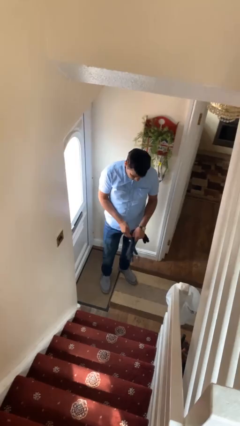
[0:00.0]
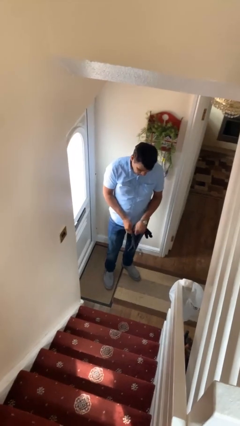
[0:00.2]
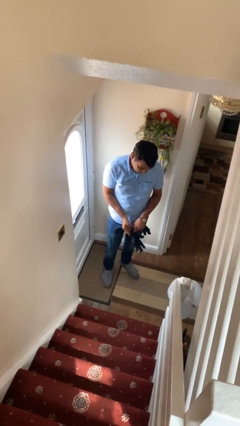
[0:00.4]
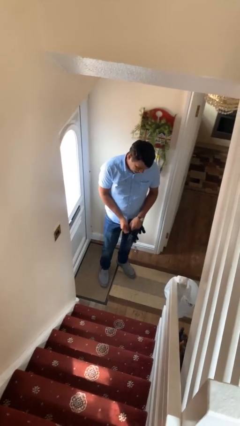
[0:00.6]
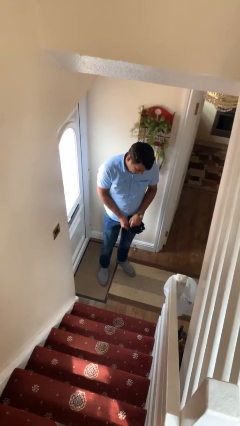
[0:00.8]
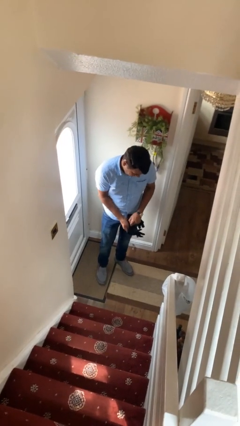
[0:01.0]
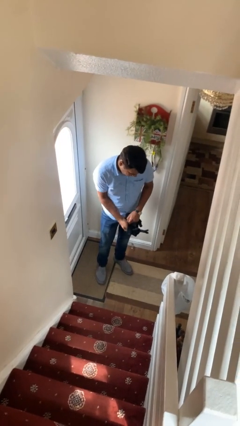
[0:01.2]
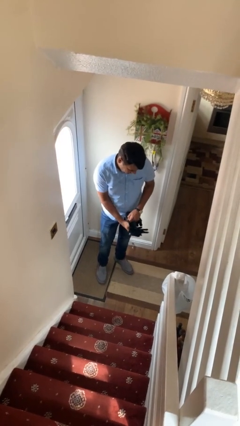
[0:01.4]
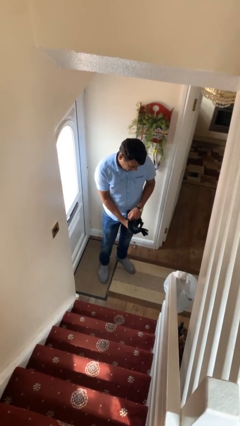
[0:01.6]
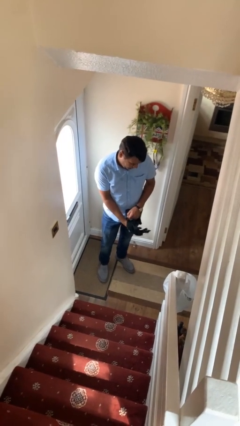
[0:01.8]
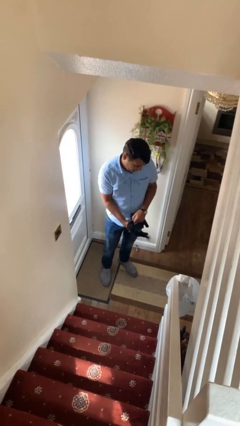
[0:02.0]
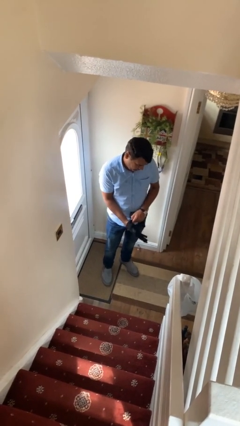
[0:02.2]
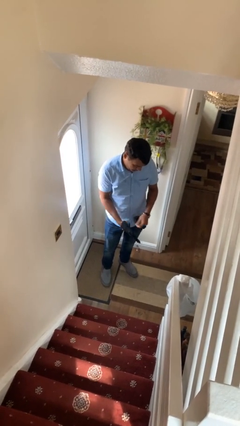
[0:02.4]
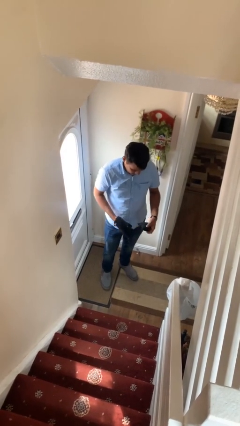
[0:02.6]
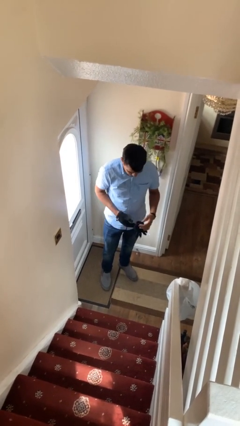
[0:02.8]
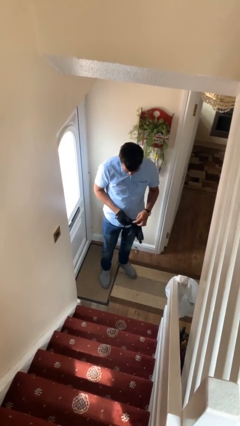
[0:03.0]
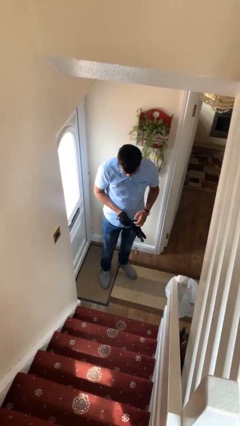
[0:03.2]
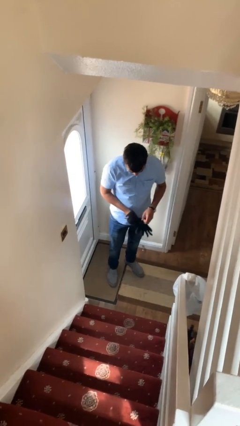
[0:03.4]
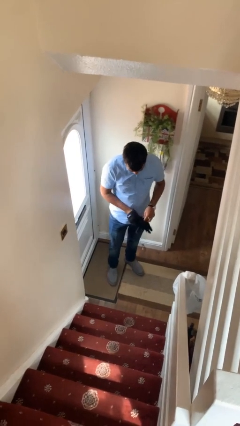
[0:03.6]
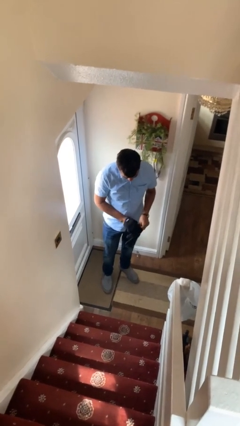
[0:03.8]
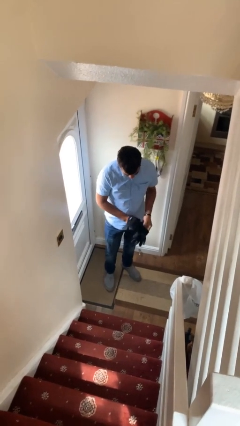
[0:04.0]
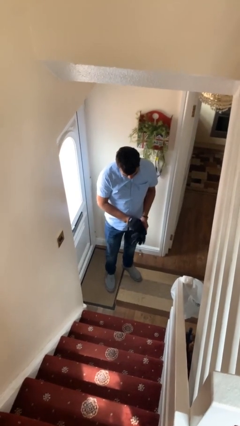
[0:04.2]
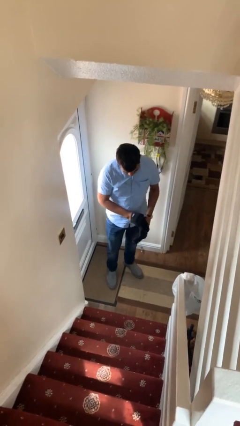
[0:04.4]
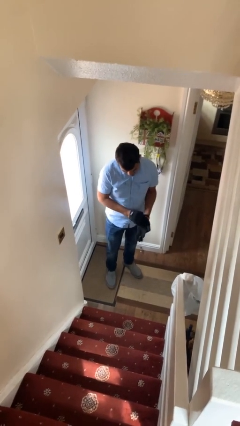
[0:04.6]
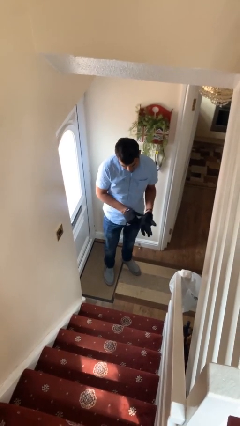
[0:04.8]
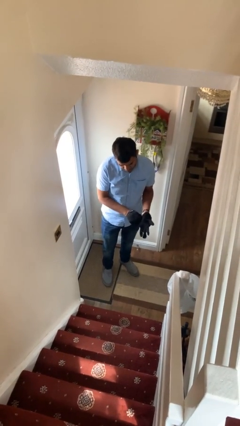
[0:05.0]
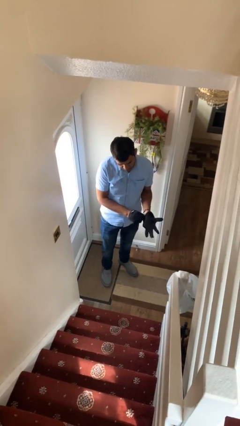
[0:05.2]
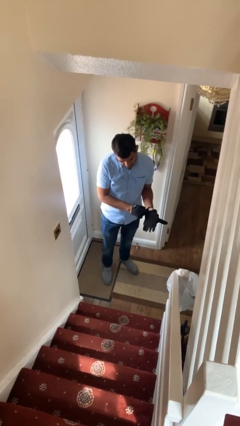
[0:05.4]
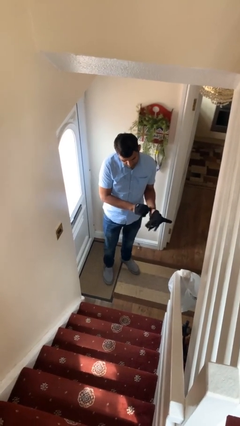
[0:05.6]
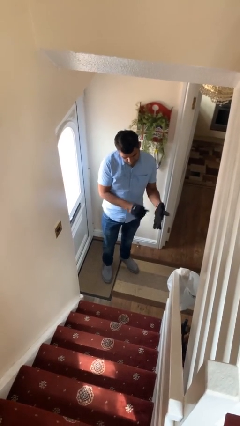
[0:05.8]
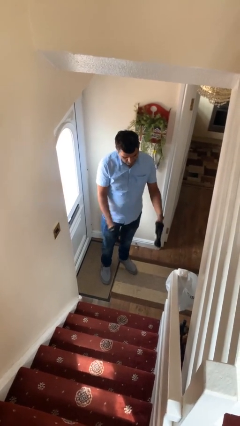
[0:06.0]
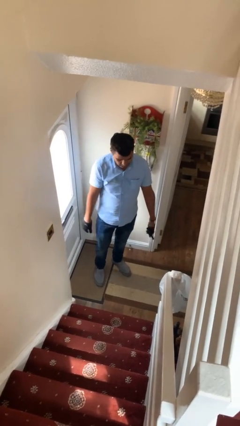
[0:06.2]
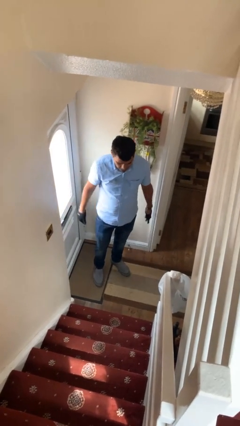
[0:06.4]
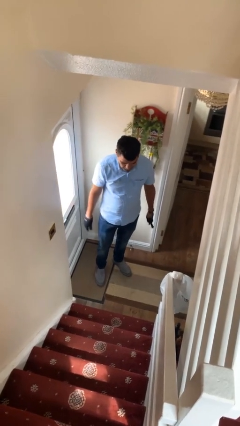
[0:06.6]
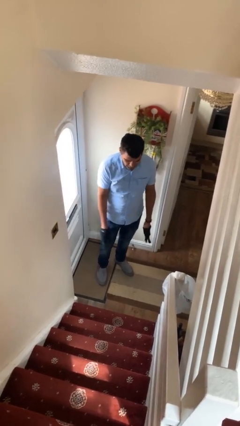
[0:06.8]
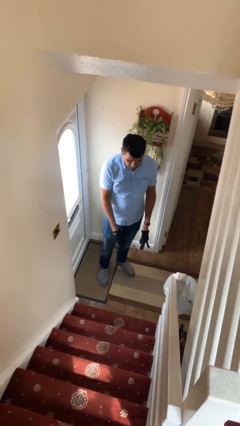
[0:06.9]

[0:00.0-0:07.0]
person puts on gloves

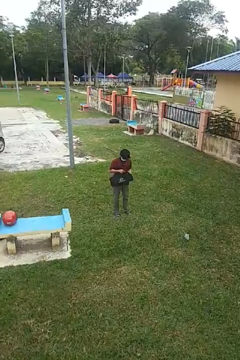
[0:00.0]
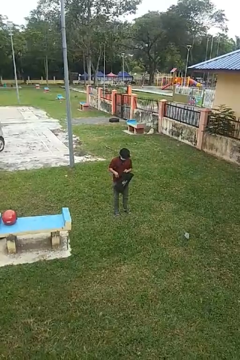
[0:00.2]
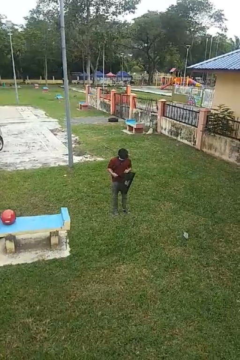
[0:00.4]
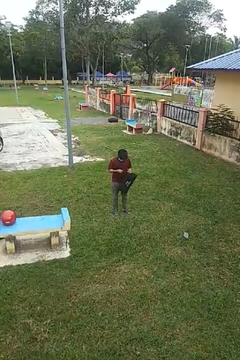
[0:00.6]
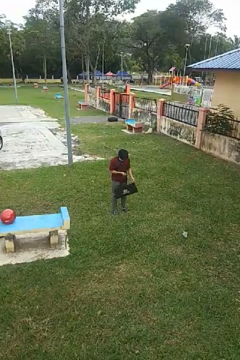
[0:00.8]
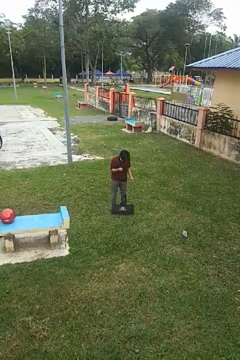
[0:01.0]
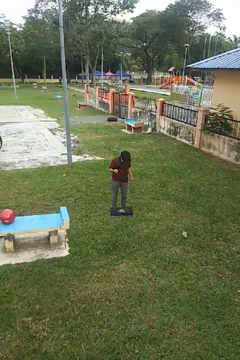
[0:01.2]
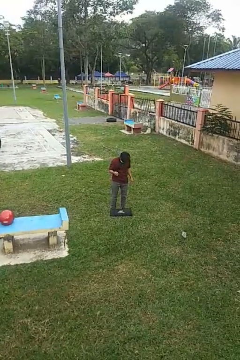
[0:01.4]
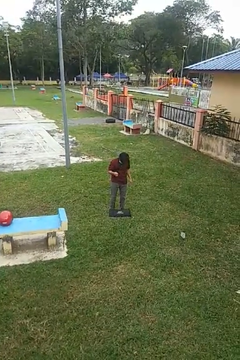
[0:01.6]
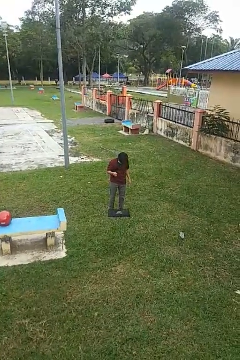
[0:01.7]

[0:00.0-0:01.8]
person drops object

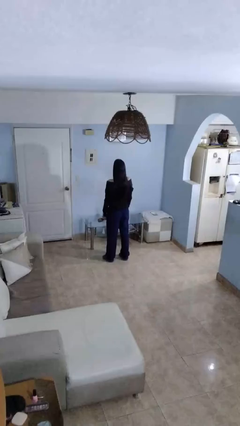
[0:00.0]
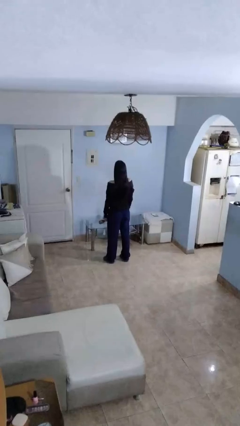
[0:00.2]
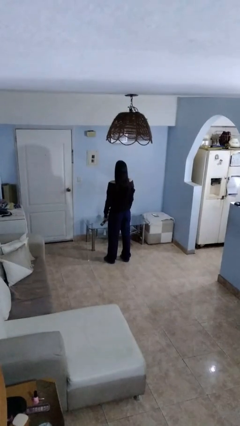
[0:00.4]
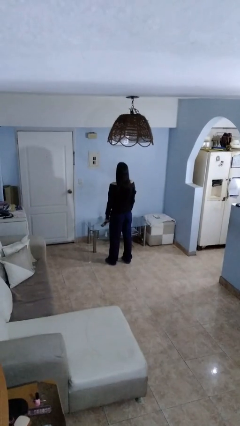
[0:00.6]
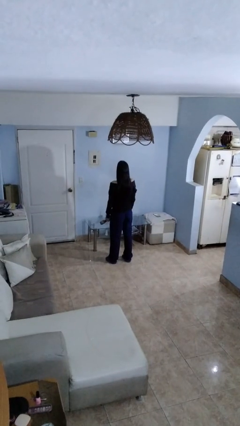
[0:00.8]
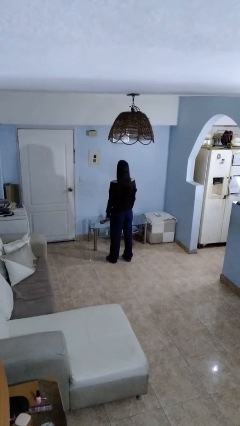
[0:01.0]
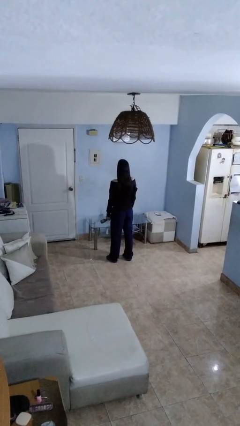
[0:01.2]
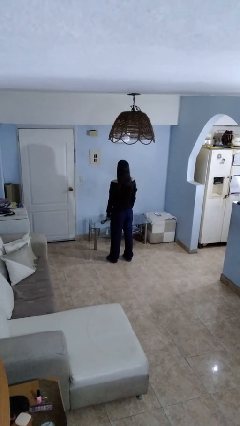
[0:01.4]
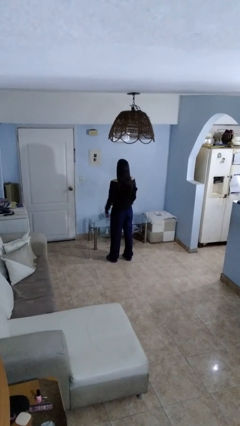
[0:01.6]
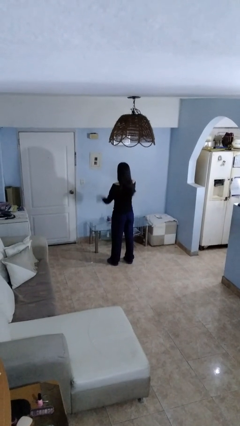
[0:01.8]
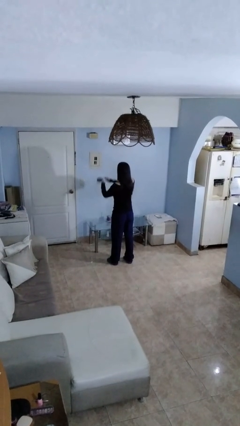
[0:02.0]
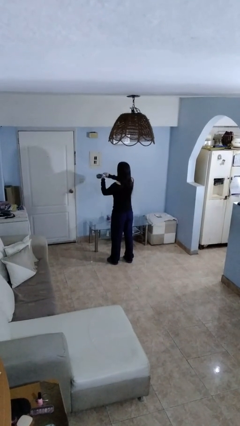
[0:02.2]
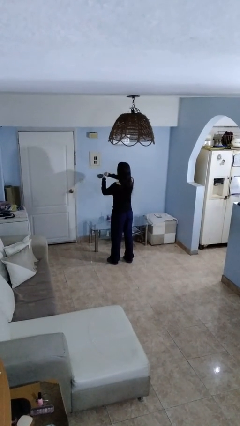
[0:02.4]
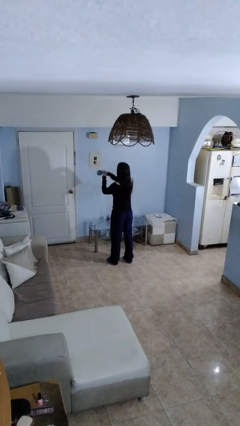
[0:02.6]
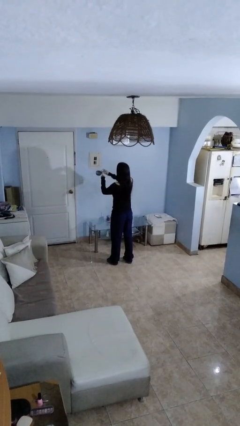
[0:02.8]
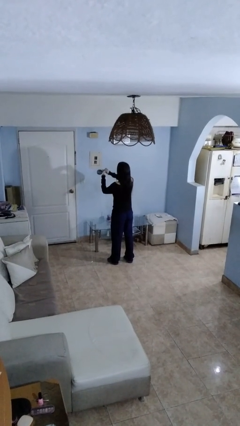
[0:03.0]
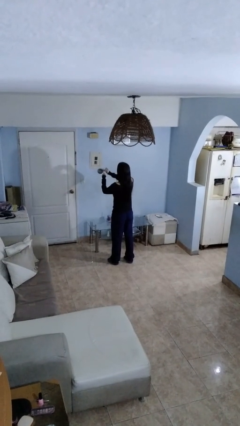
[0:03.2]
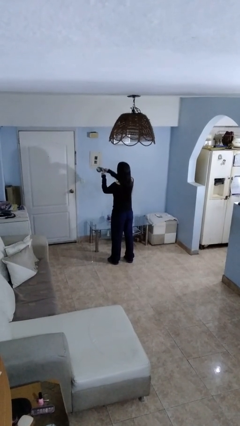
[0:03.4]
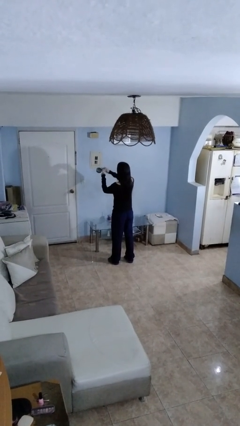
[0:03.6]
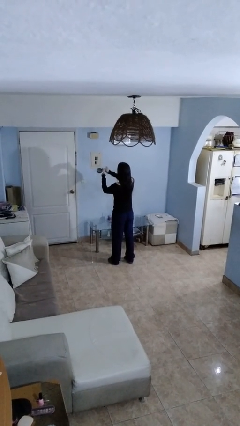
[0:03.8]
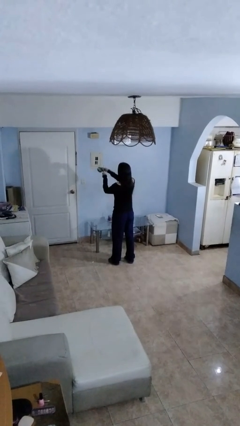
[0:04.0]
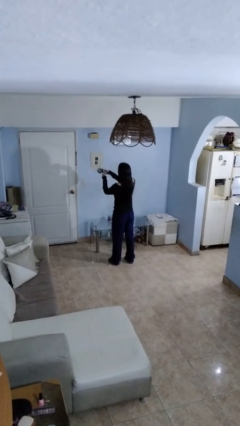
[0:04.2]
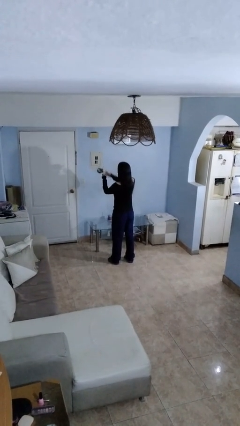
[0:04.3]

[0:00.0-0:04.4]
person opens can with can opener

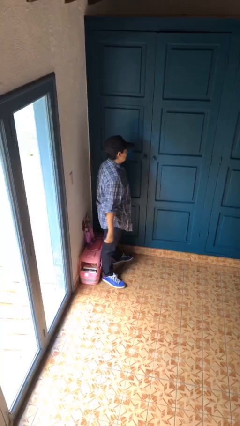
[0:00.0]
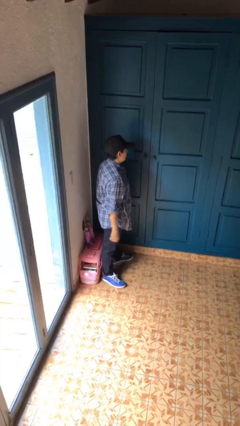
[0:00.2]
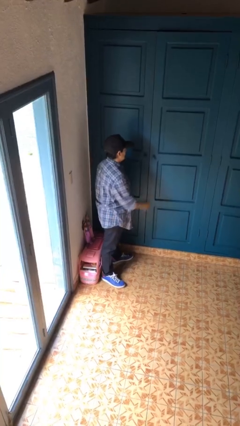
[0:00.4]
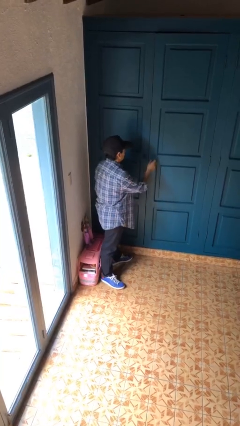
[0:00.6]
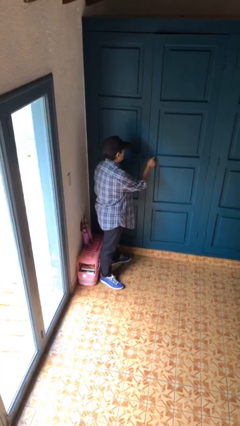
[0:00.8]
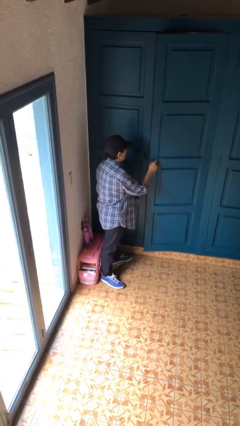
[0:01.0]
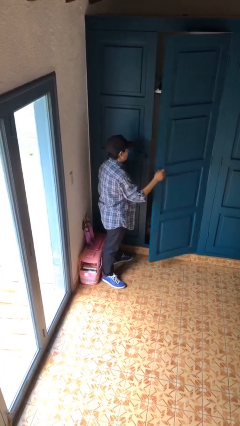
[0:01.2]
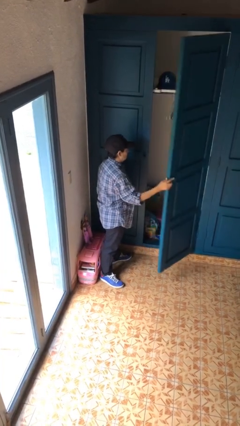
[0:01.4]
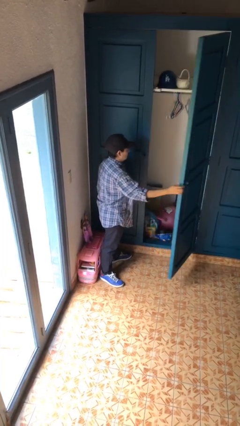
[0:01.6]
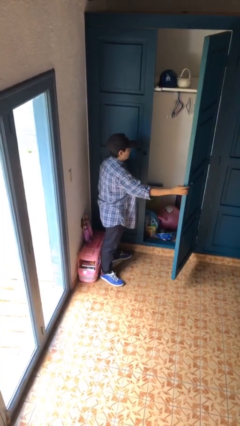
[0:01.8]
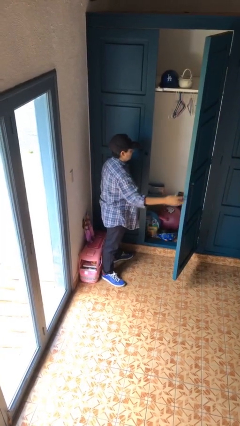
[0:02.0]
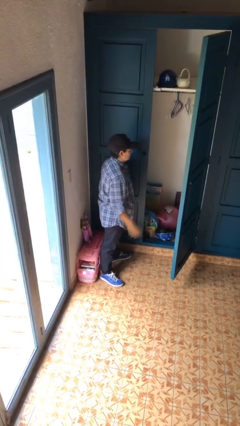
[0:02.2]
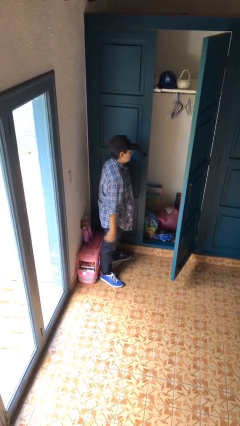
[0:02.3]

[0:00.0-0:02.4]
person opens closet door

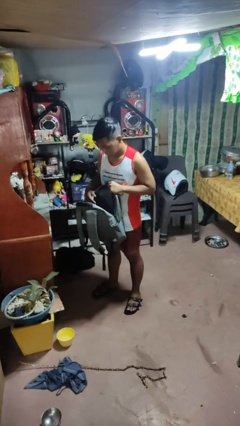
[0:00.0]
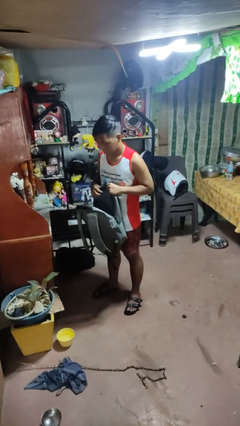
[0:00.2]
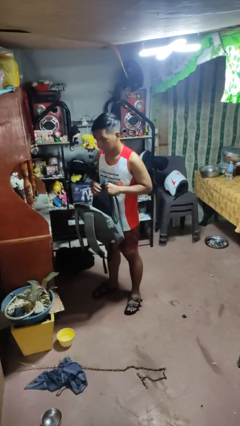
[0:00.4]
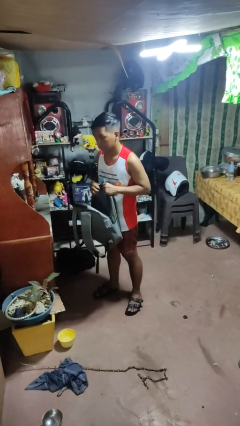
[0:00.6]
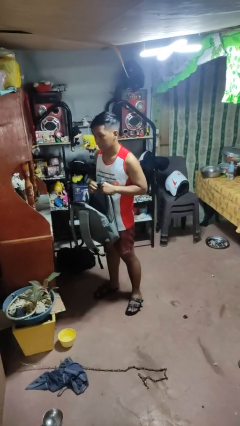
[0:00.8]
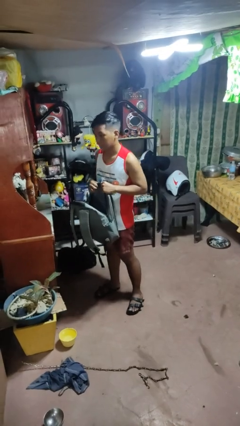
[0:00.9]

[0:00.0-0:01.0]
person puts object into bag

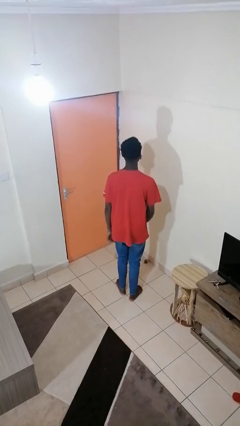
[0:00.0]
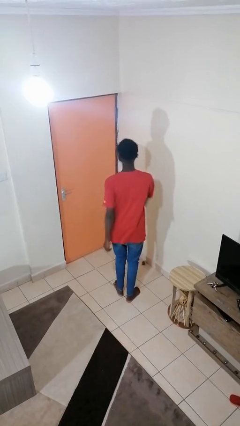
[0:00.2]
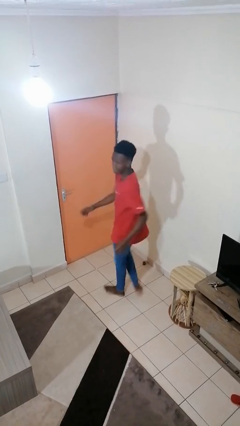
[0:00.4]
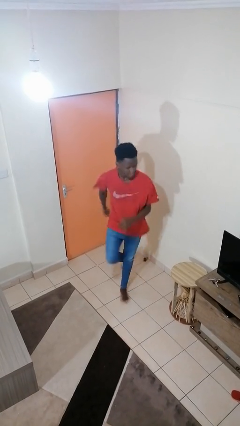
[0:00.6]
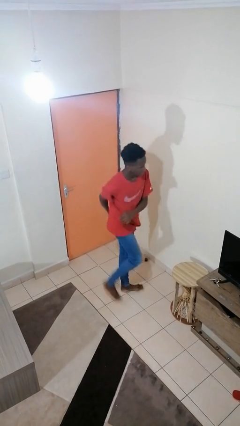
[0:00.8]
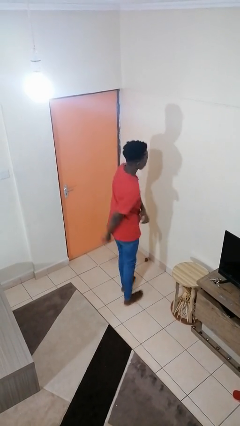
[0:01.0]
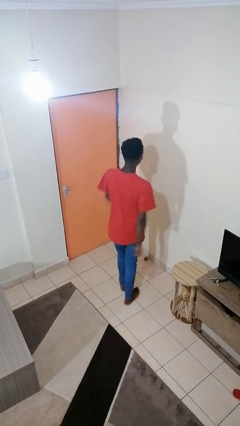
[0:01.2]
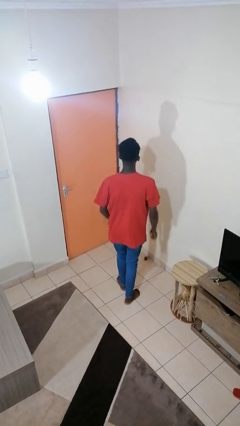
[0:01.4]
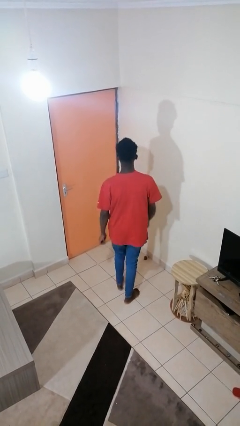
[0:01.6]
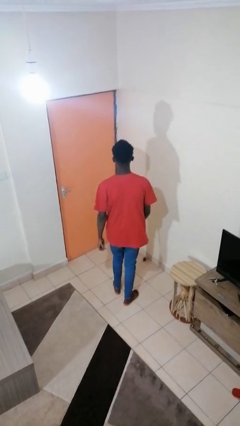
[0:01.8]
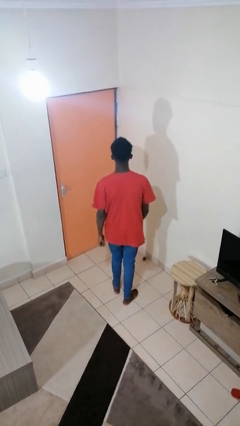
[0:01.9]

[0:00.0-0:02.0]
person twirls
